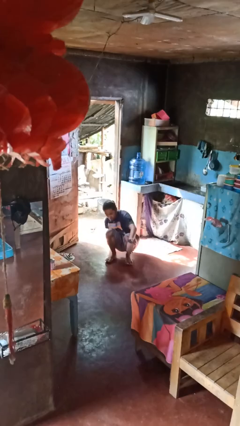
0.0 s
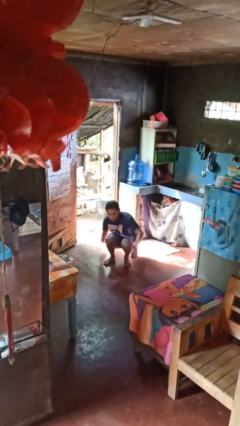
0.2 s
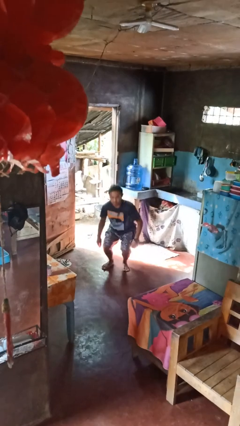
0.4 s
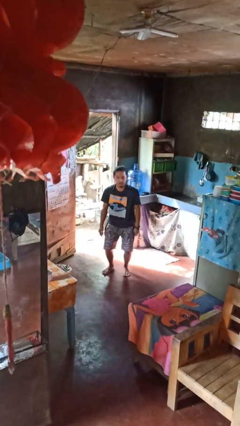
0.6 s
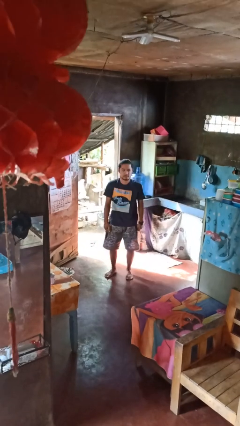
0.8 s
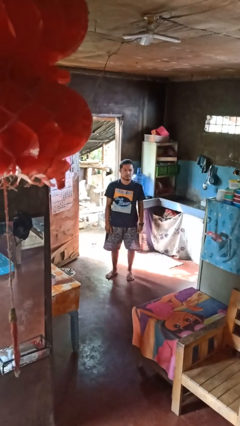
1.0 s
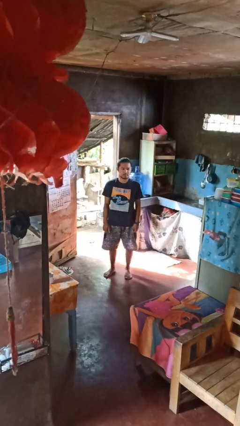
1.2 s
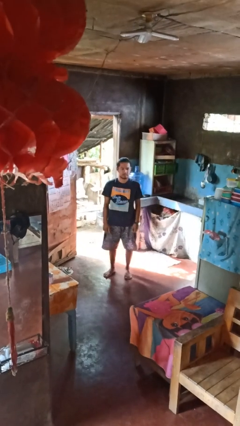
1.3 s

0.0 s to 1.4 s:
person stands up from floor

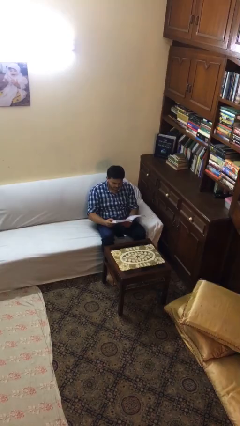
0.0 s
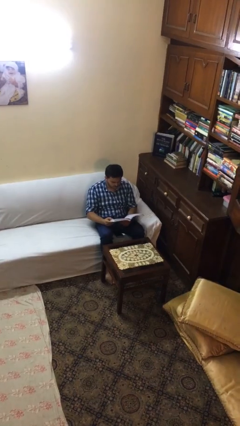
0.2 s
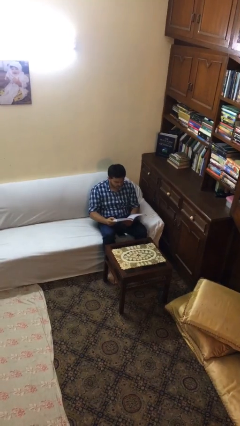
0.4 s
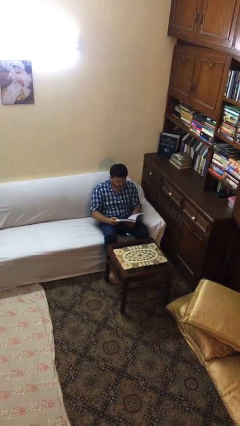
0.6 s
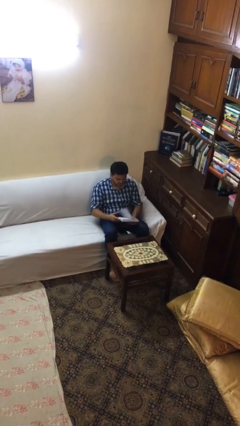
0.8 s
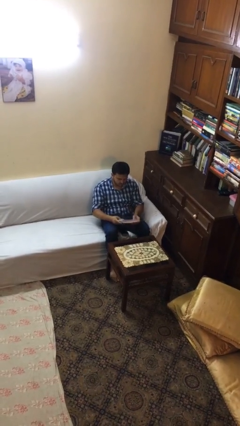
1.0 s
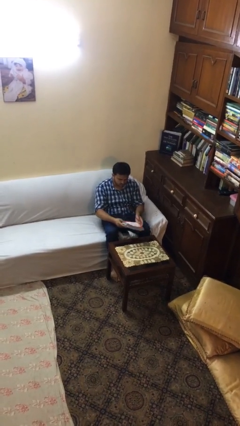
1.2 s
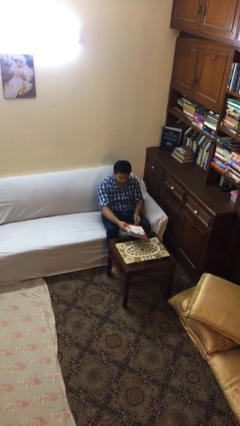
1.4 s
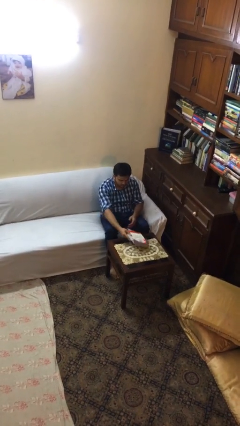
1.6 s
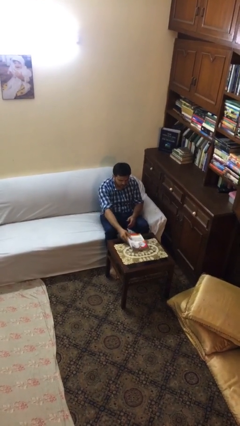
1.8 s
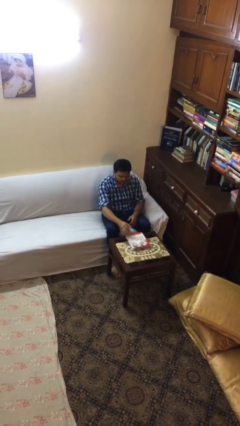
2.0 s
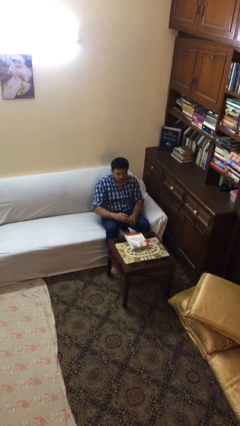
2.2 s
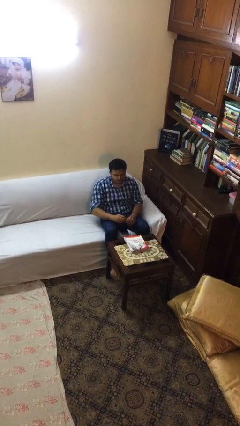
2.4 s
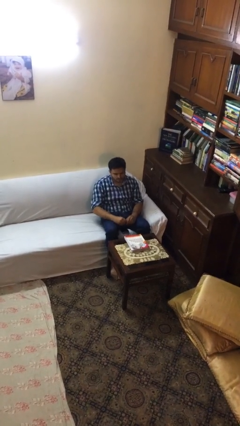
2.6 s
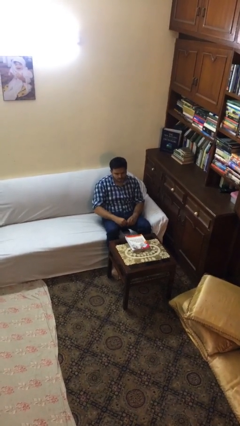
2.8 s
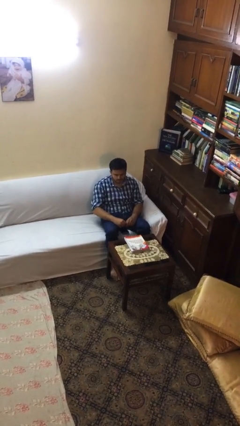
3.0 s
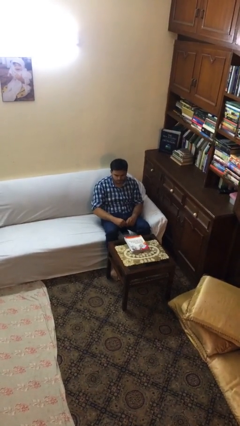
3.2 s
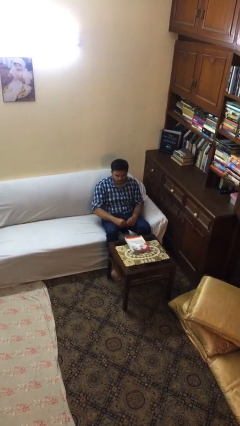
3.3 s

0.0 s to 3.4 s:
person puts down object on table

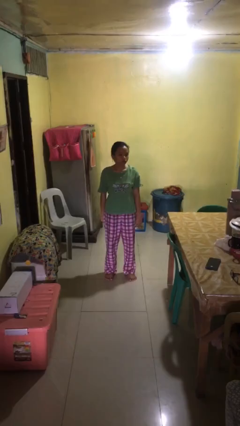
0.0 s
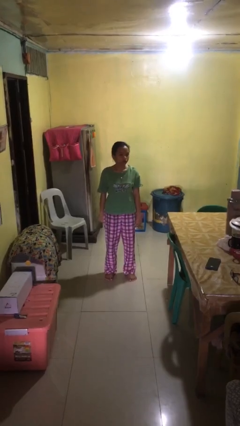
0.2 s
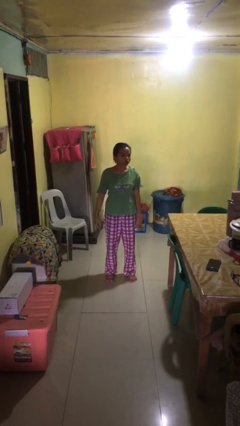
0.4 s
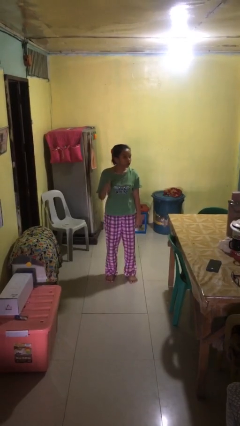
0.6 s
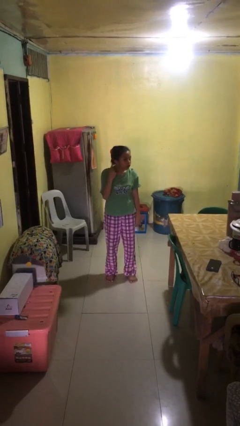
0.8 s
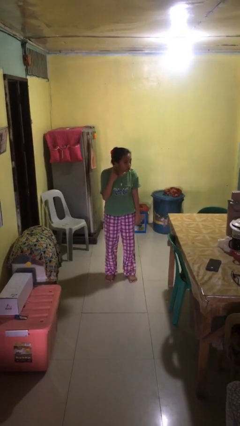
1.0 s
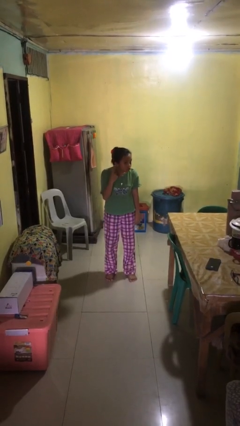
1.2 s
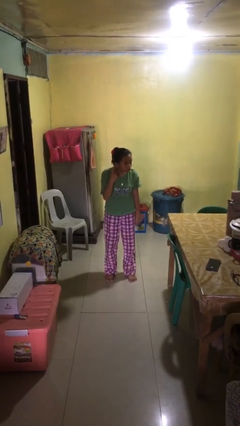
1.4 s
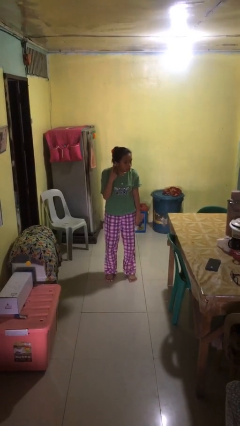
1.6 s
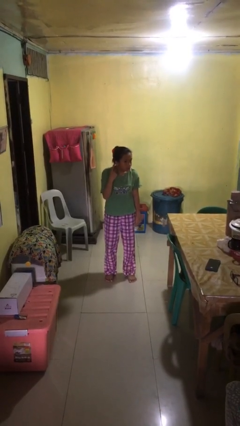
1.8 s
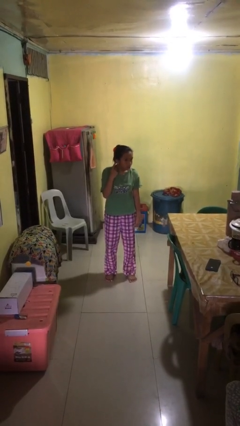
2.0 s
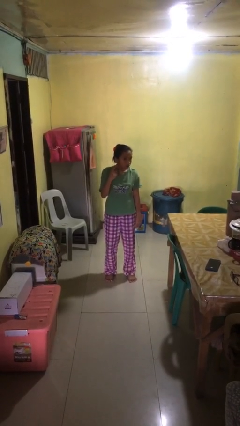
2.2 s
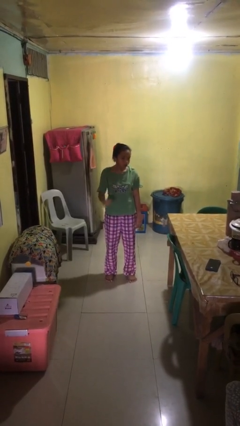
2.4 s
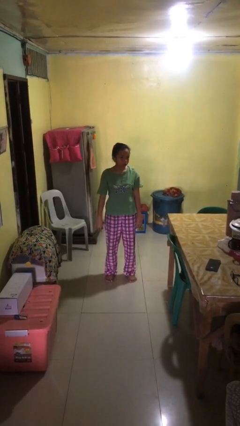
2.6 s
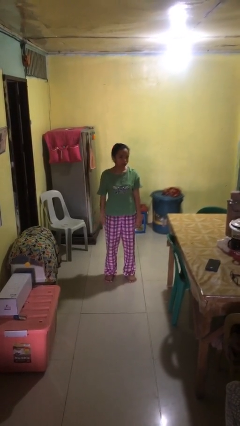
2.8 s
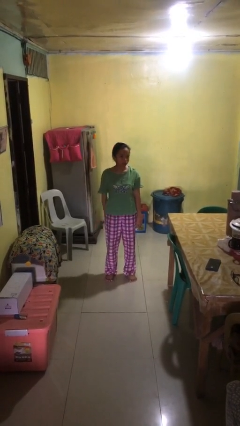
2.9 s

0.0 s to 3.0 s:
person gestures listen closely

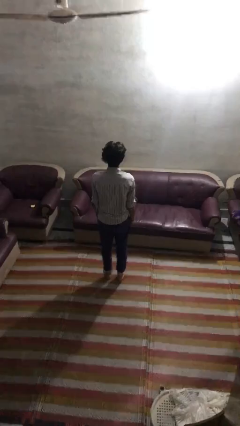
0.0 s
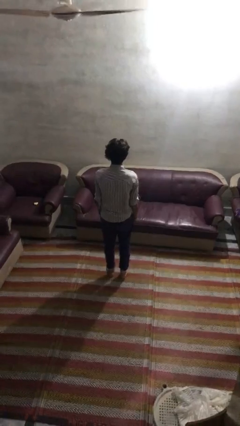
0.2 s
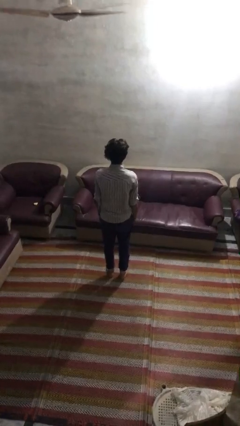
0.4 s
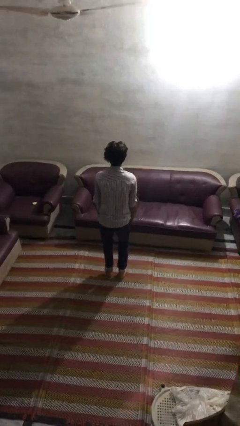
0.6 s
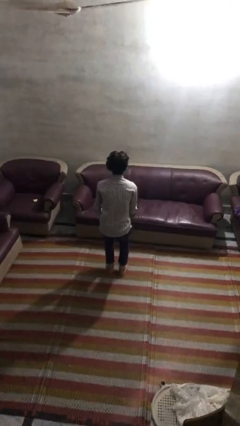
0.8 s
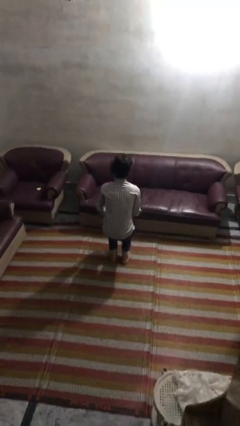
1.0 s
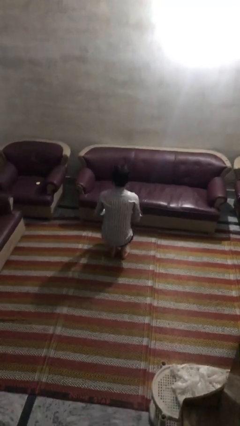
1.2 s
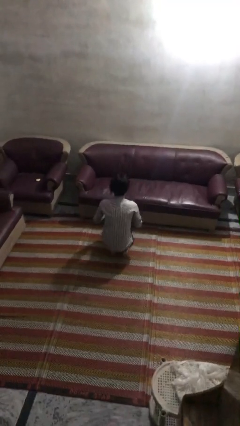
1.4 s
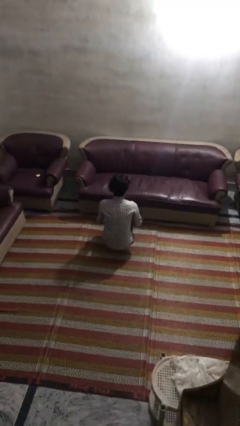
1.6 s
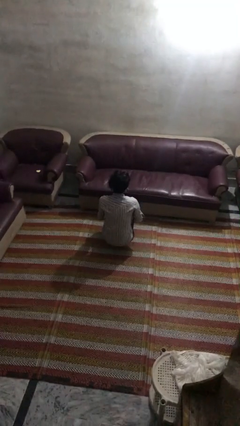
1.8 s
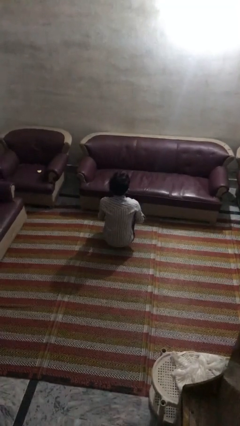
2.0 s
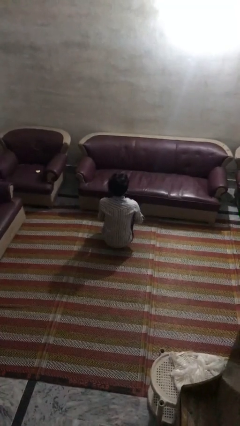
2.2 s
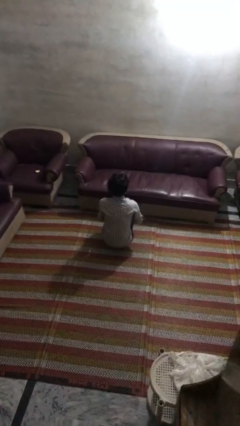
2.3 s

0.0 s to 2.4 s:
person squats

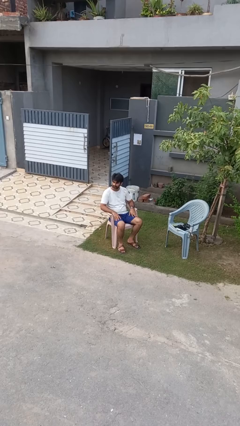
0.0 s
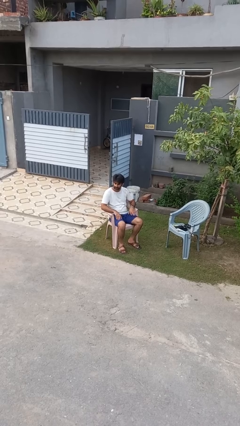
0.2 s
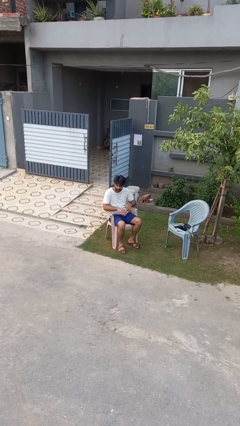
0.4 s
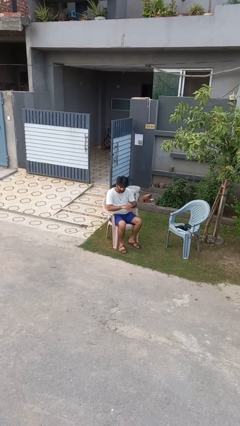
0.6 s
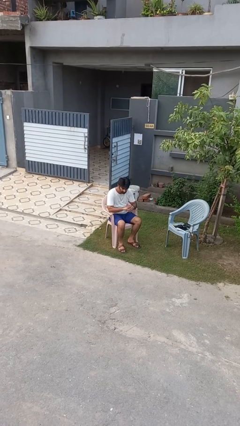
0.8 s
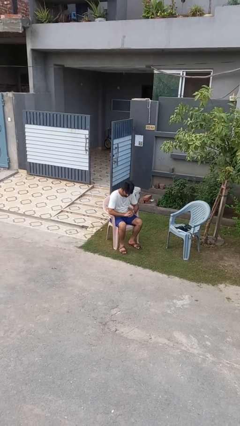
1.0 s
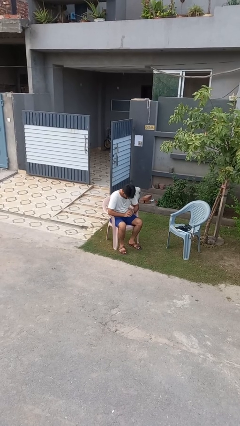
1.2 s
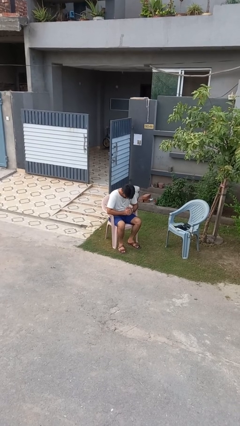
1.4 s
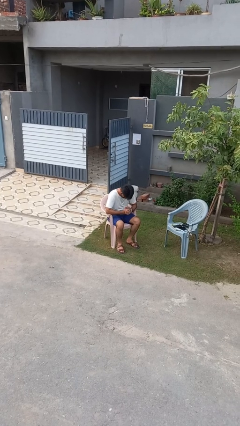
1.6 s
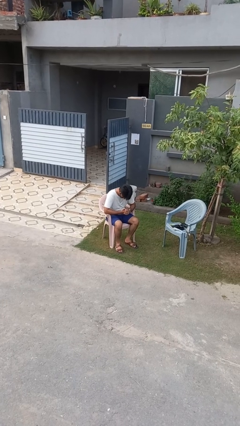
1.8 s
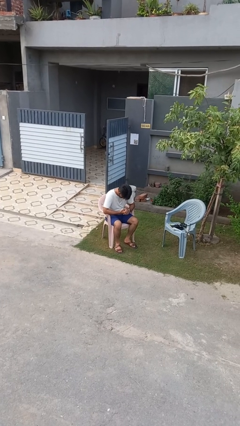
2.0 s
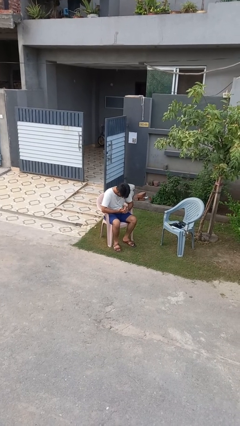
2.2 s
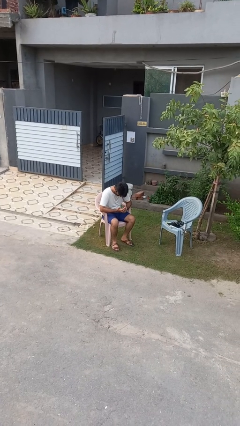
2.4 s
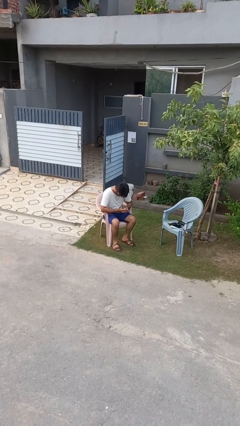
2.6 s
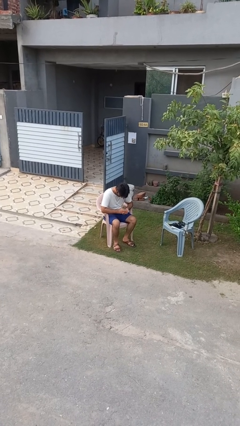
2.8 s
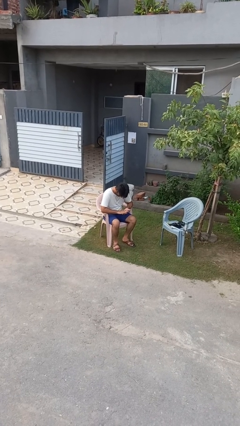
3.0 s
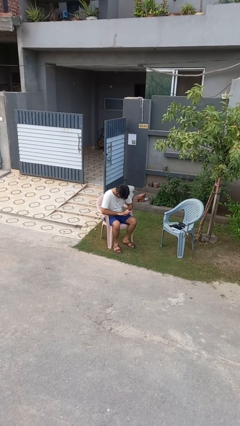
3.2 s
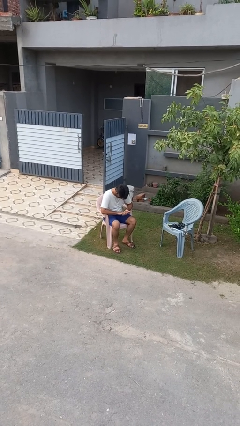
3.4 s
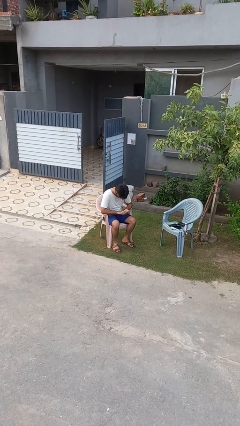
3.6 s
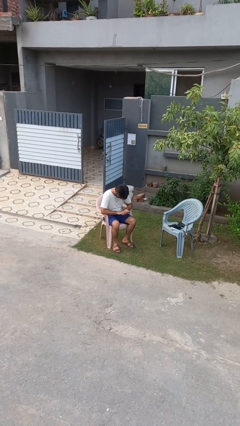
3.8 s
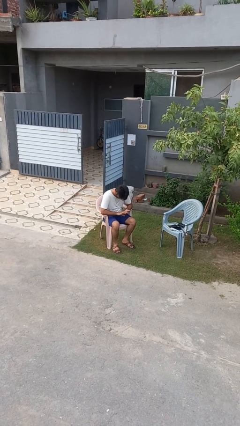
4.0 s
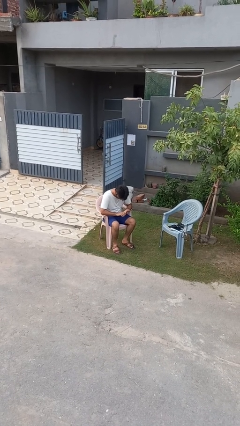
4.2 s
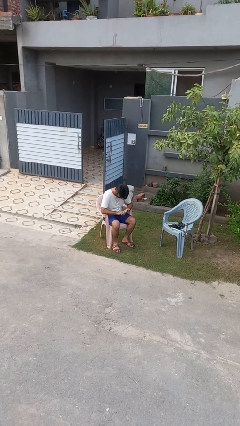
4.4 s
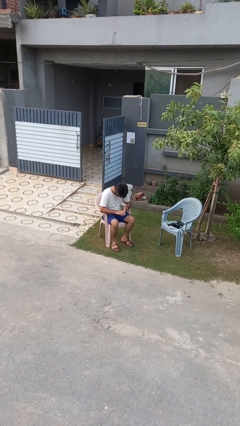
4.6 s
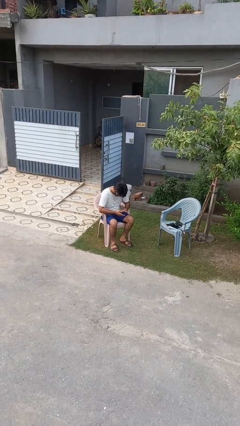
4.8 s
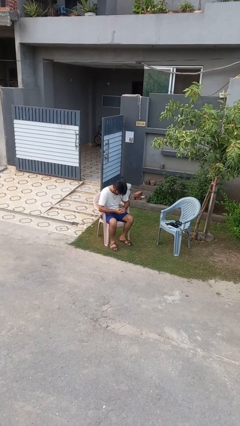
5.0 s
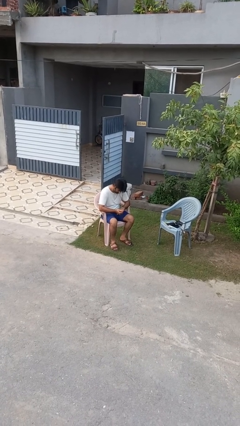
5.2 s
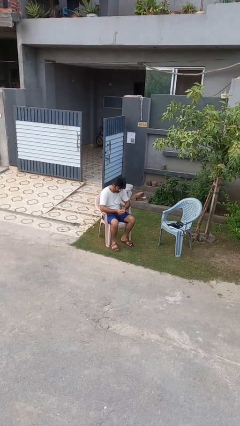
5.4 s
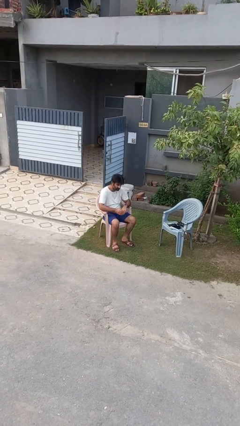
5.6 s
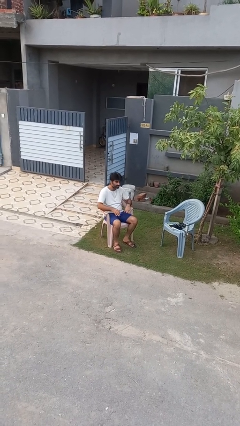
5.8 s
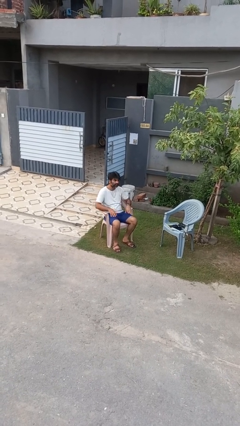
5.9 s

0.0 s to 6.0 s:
person looks at hands in lap

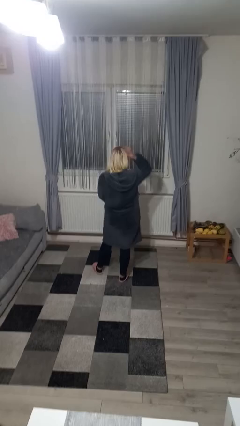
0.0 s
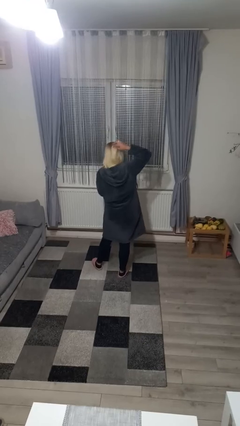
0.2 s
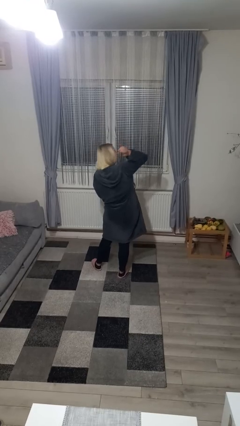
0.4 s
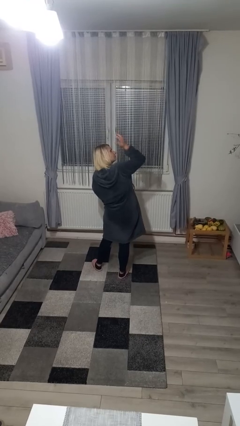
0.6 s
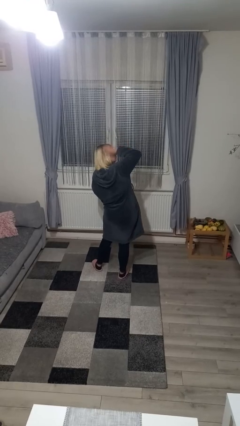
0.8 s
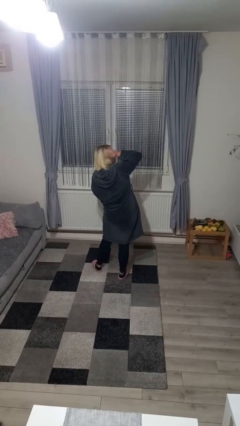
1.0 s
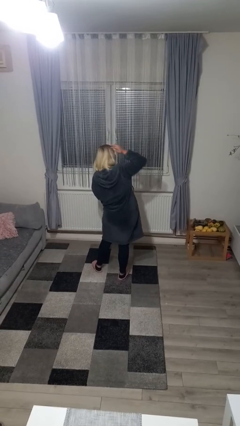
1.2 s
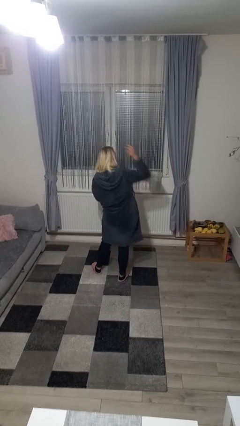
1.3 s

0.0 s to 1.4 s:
person swats bug
